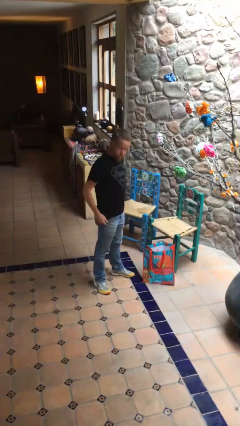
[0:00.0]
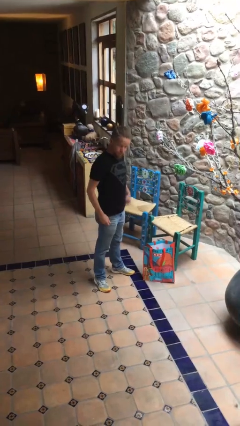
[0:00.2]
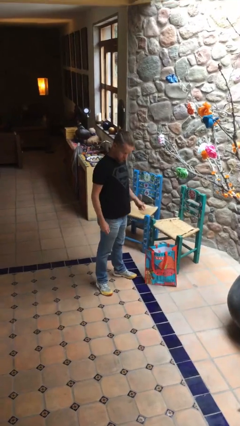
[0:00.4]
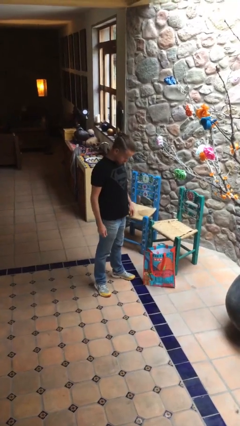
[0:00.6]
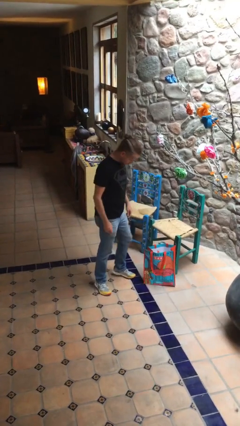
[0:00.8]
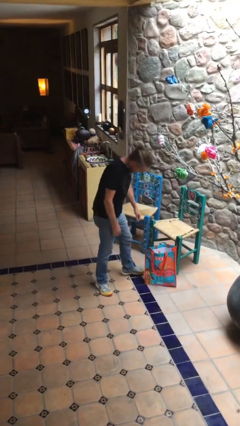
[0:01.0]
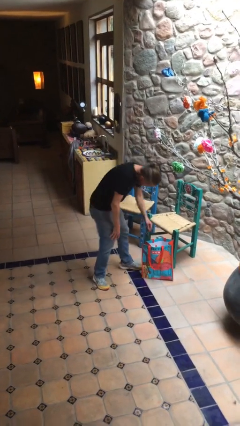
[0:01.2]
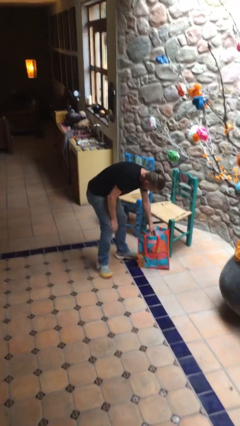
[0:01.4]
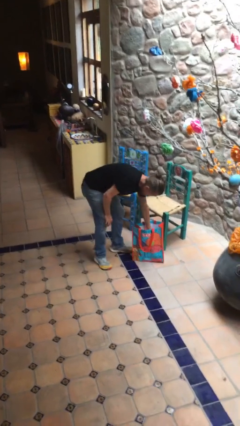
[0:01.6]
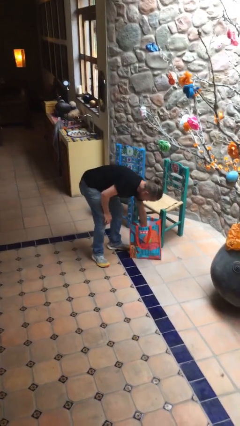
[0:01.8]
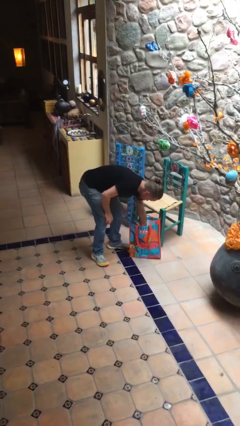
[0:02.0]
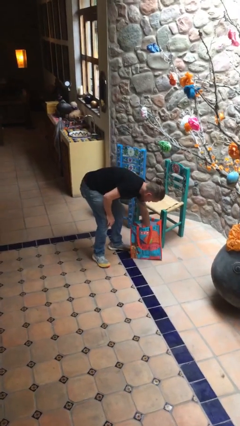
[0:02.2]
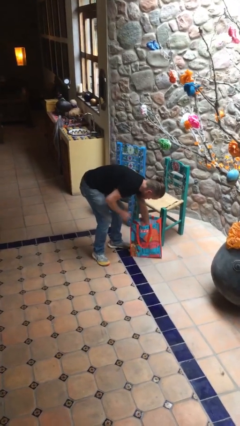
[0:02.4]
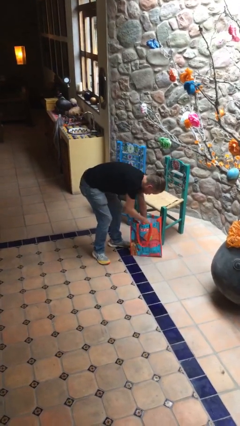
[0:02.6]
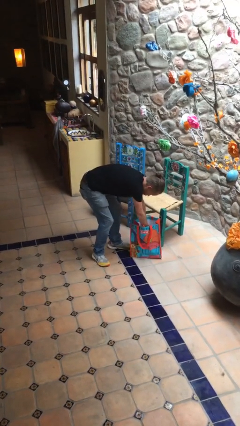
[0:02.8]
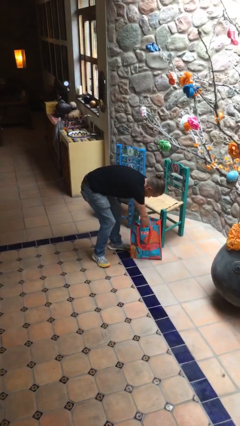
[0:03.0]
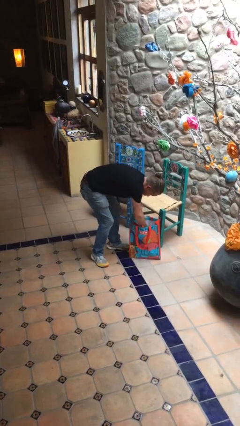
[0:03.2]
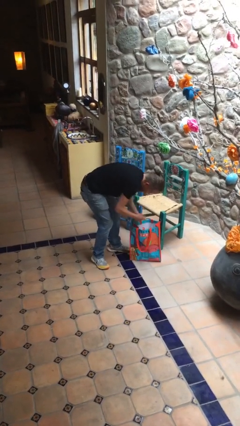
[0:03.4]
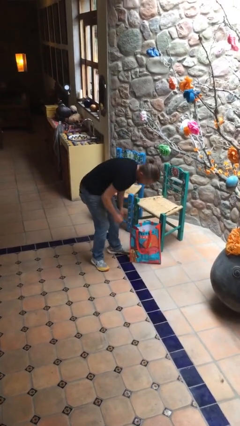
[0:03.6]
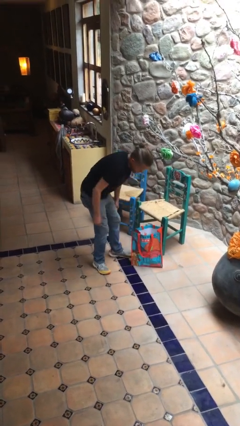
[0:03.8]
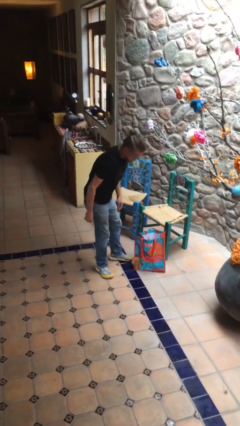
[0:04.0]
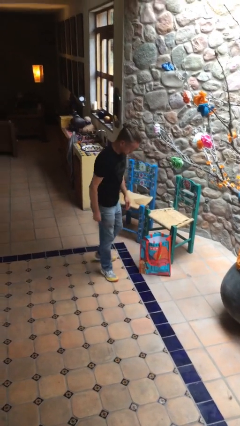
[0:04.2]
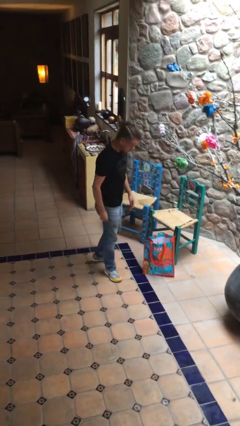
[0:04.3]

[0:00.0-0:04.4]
person searches in bag

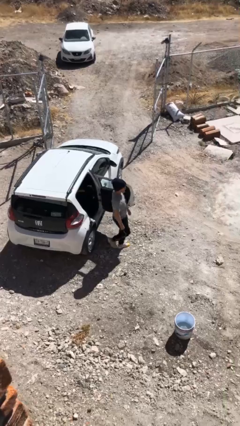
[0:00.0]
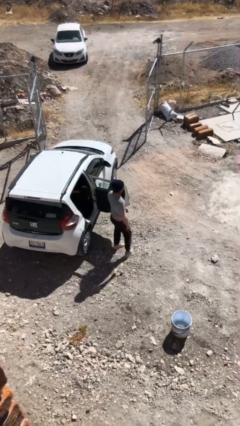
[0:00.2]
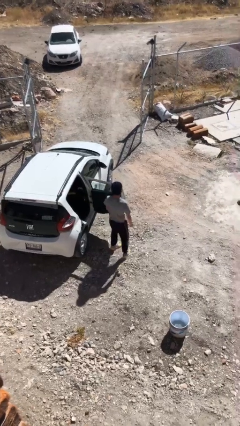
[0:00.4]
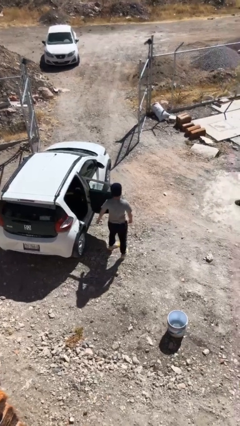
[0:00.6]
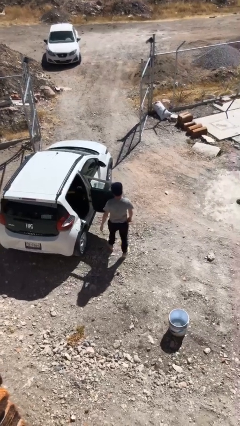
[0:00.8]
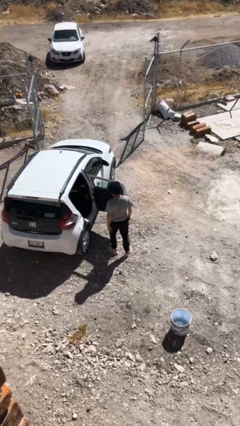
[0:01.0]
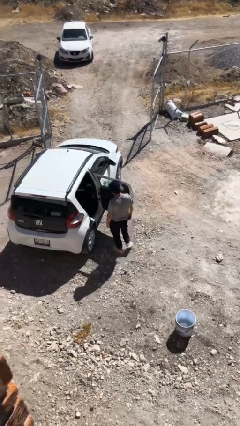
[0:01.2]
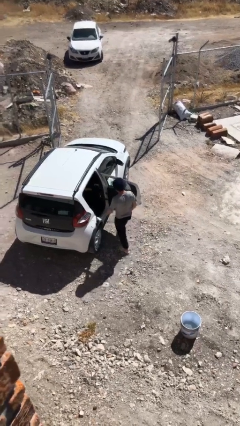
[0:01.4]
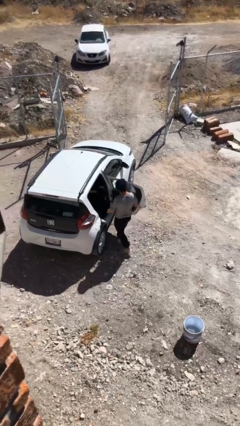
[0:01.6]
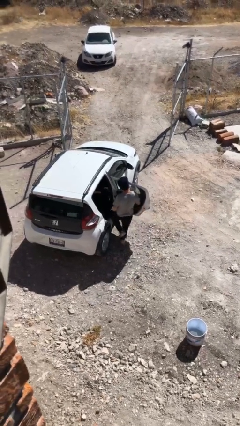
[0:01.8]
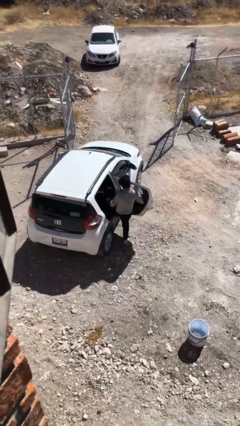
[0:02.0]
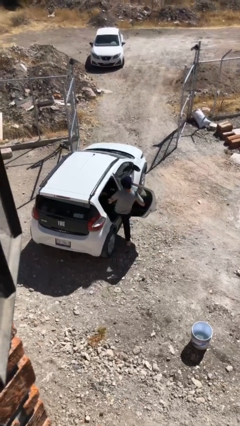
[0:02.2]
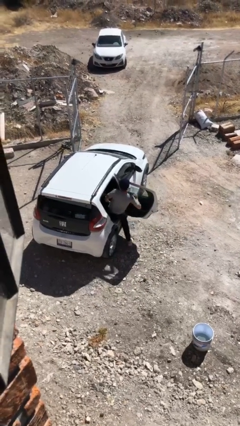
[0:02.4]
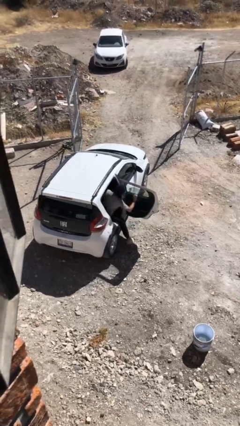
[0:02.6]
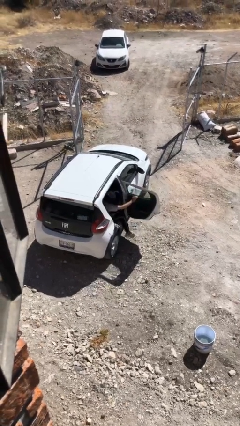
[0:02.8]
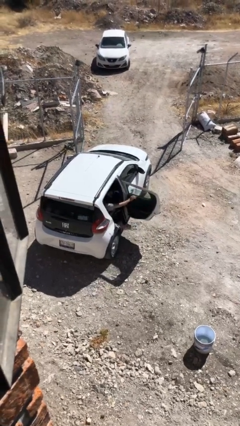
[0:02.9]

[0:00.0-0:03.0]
person enters car

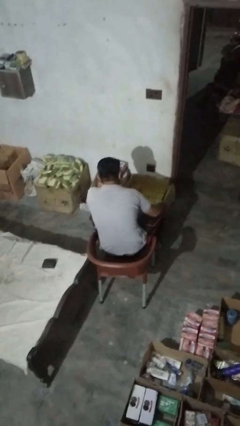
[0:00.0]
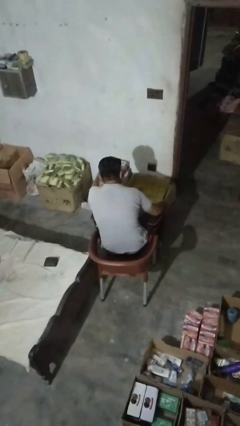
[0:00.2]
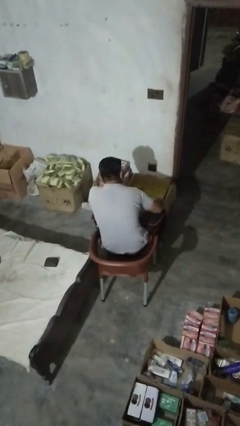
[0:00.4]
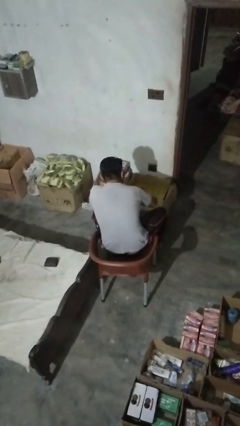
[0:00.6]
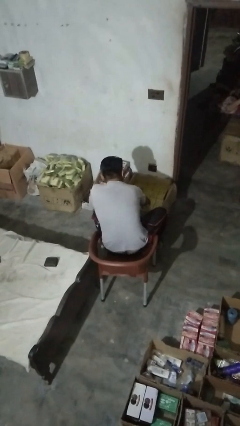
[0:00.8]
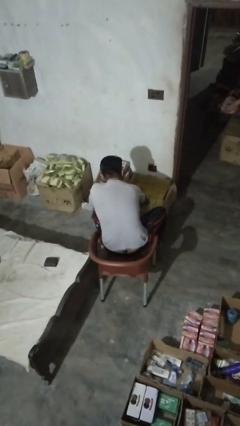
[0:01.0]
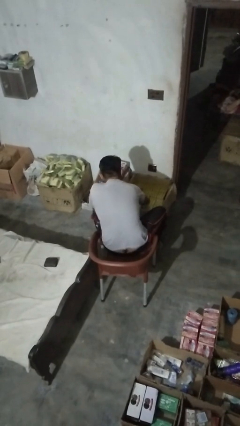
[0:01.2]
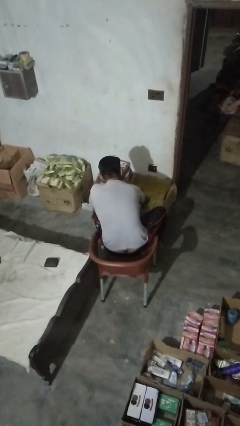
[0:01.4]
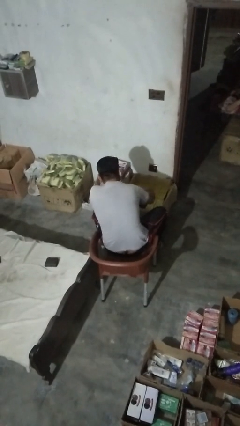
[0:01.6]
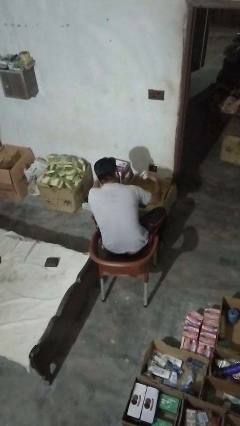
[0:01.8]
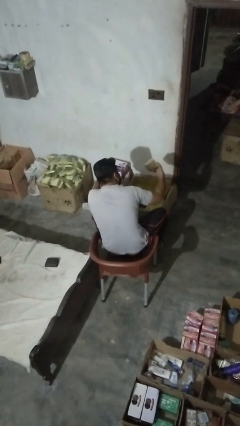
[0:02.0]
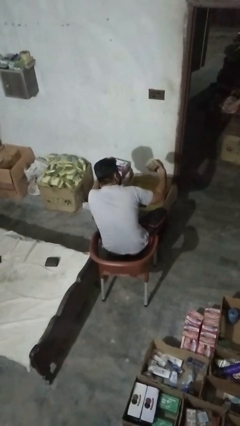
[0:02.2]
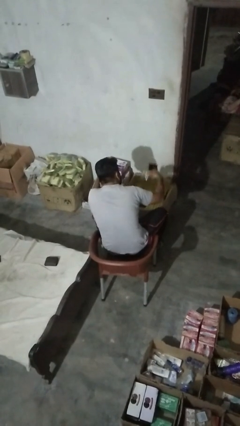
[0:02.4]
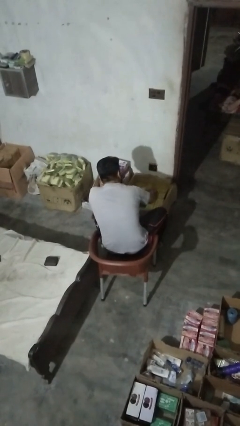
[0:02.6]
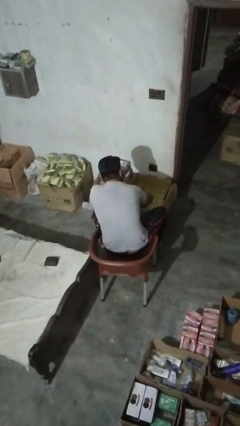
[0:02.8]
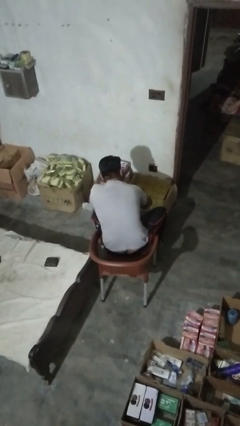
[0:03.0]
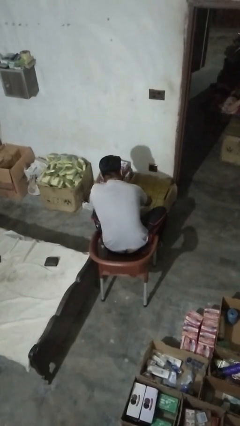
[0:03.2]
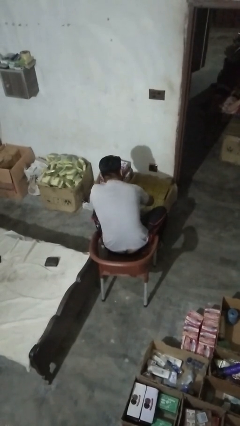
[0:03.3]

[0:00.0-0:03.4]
person searches in box

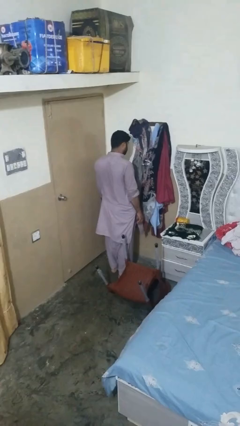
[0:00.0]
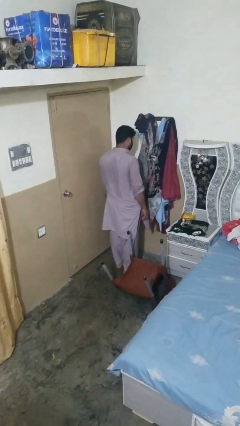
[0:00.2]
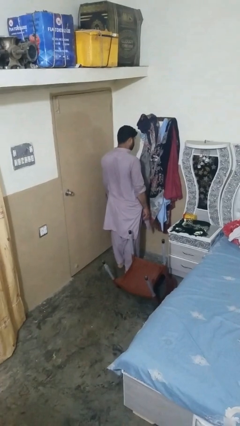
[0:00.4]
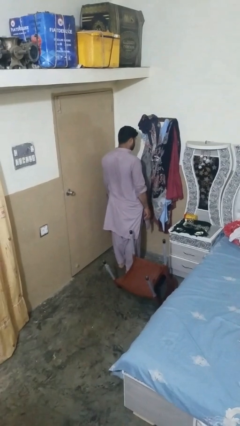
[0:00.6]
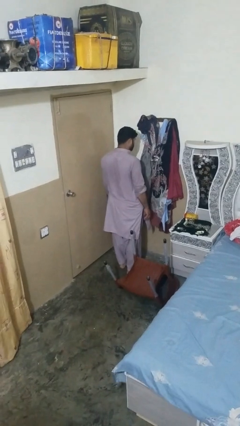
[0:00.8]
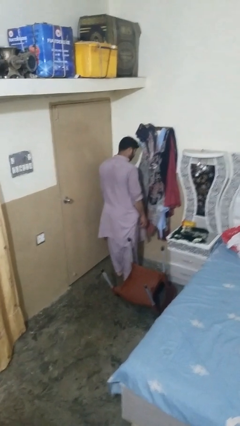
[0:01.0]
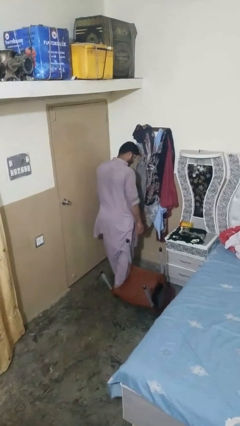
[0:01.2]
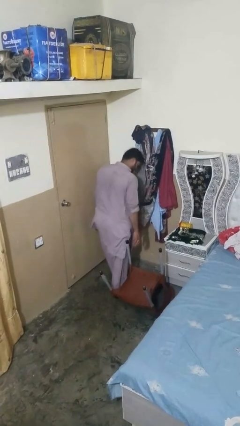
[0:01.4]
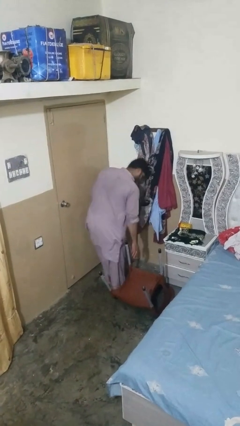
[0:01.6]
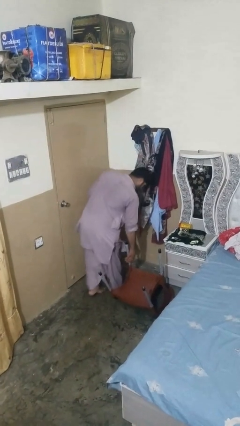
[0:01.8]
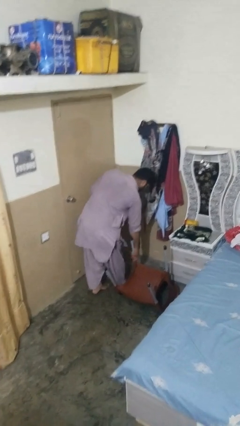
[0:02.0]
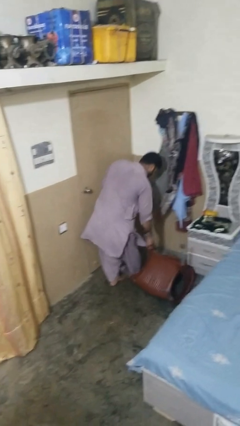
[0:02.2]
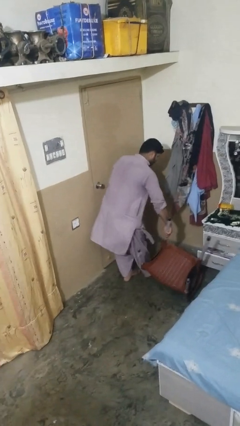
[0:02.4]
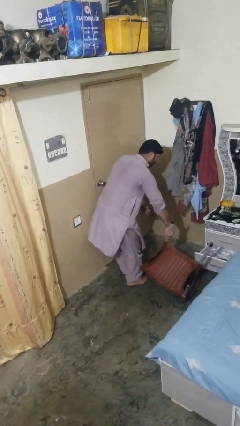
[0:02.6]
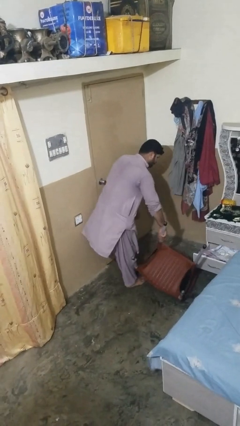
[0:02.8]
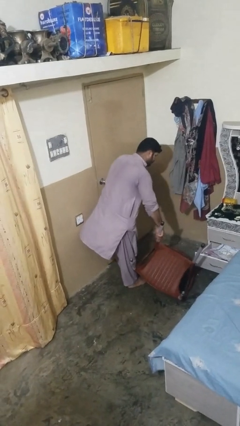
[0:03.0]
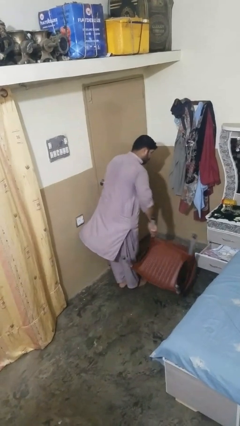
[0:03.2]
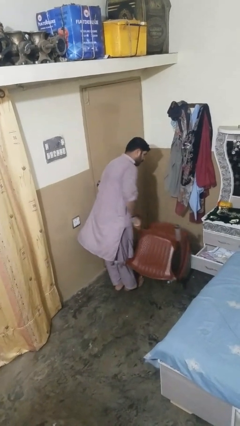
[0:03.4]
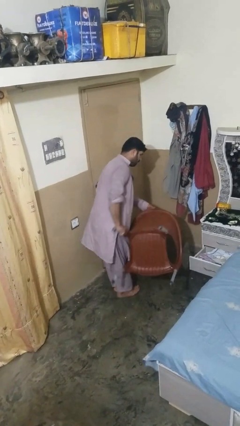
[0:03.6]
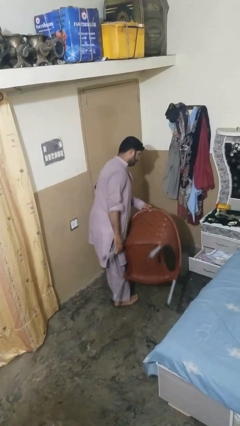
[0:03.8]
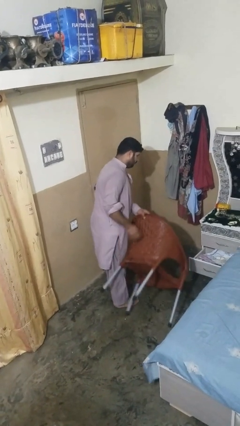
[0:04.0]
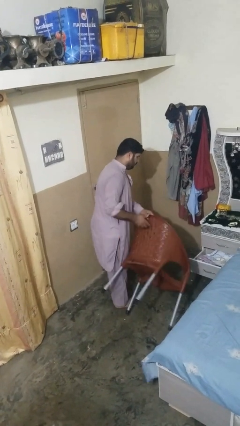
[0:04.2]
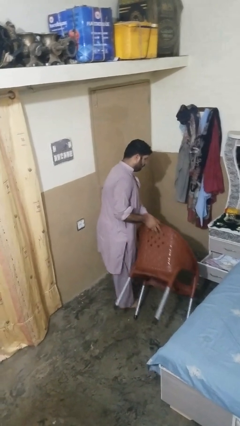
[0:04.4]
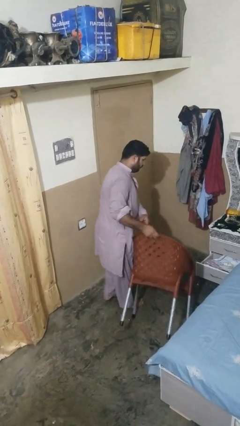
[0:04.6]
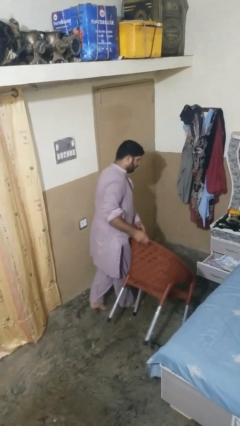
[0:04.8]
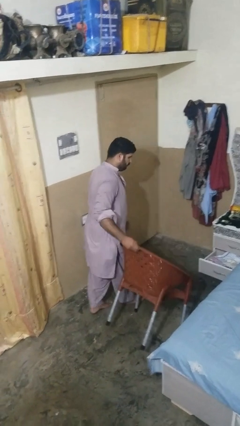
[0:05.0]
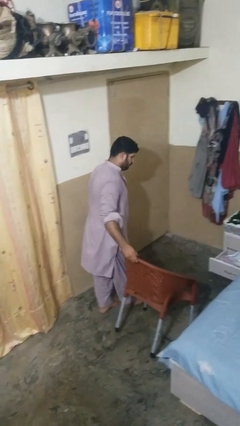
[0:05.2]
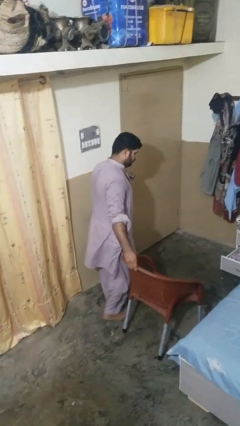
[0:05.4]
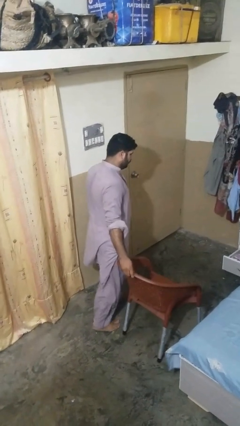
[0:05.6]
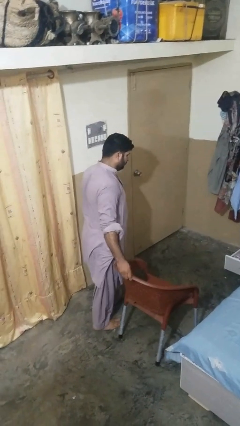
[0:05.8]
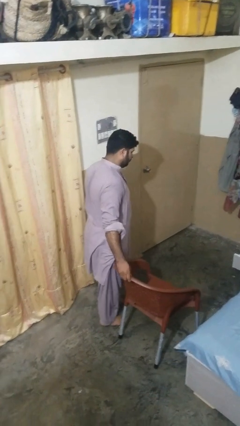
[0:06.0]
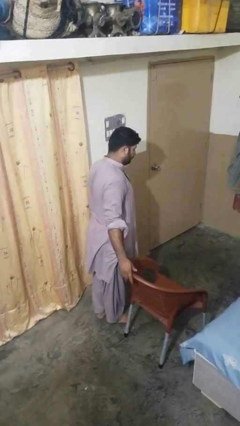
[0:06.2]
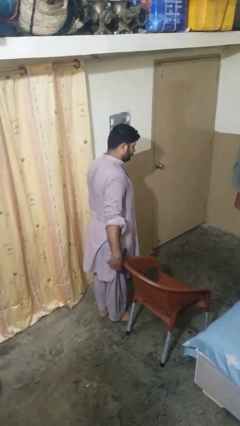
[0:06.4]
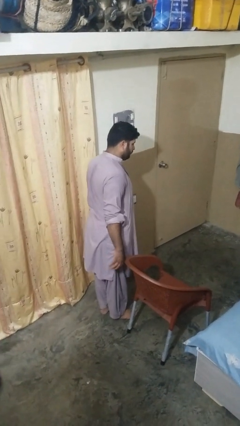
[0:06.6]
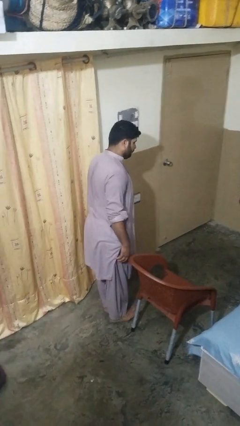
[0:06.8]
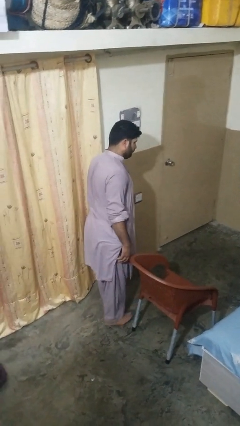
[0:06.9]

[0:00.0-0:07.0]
person sets upright furniture
